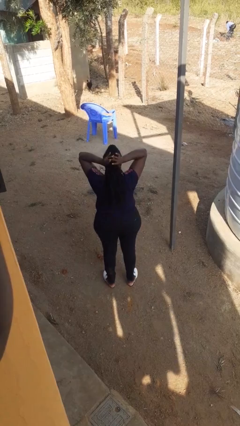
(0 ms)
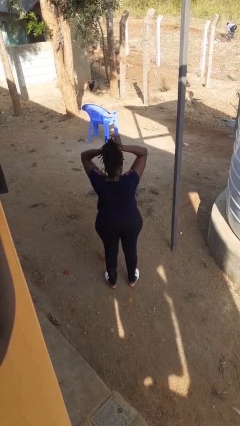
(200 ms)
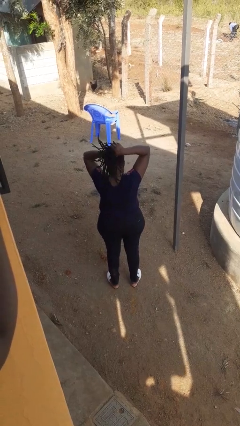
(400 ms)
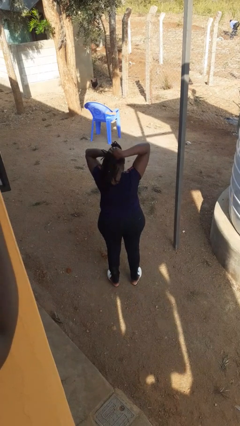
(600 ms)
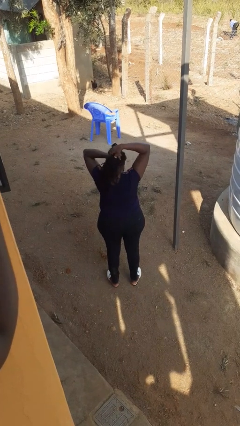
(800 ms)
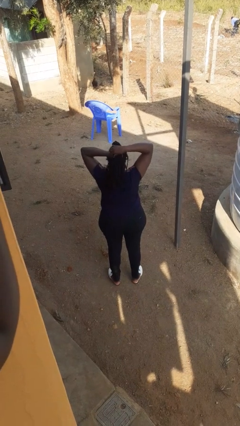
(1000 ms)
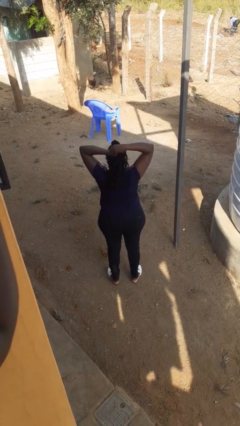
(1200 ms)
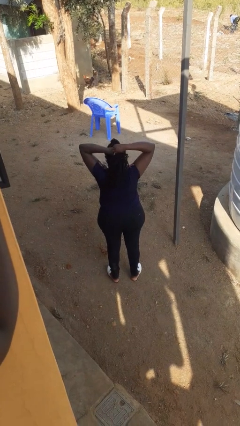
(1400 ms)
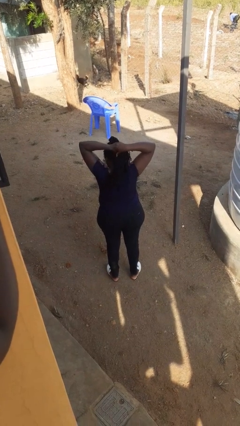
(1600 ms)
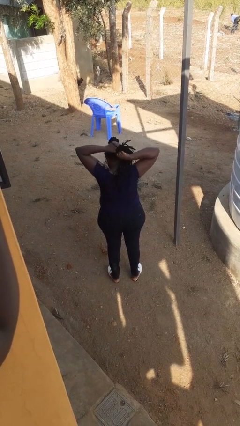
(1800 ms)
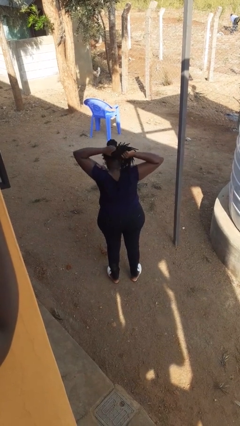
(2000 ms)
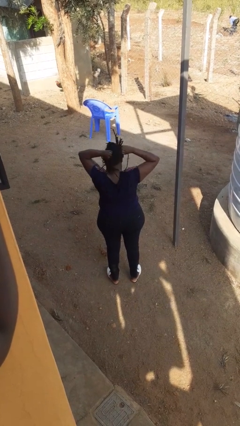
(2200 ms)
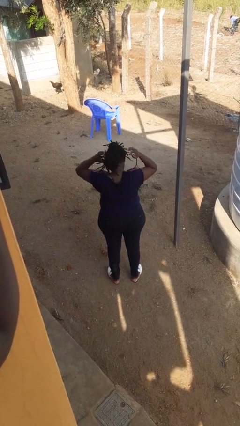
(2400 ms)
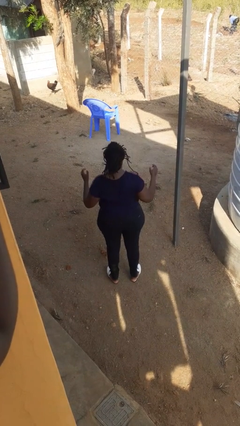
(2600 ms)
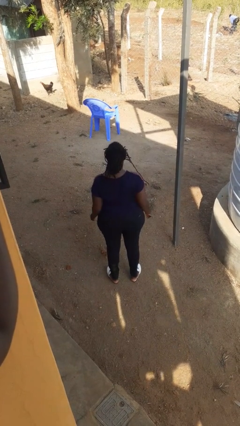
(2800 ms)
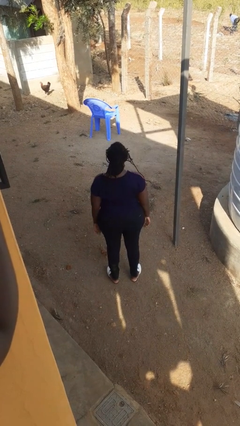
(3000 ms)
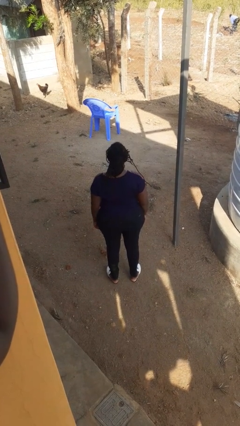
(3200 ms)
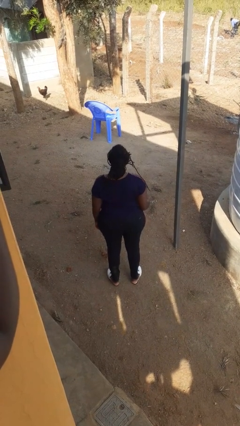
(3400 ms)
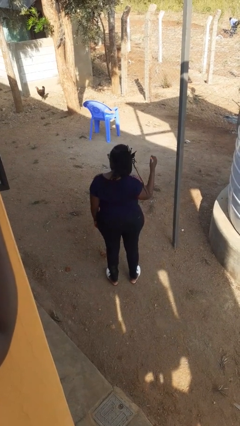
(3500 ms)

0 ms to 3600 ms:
person puts hair in ponytail

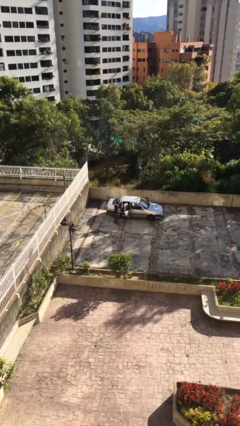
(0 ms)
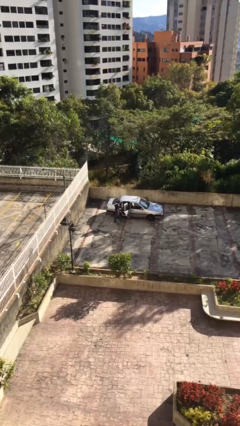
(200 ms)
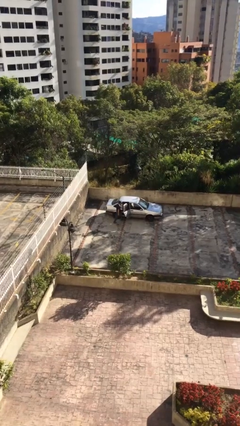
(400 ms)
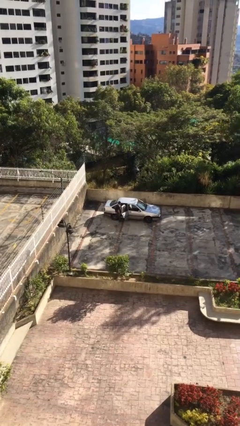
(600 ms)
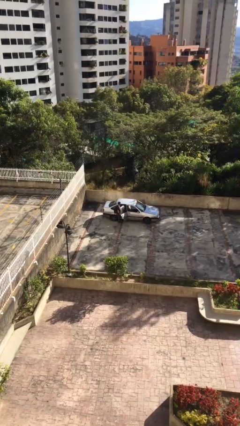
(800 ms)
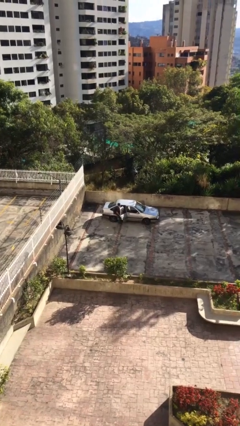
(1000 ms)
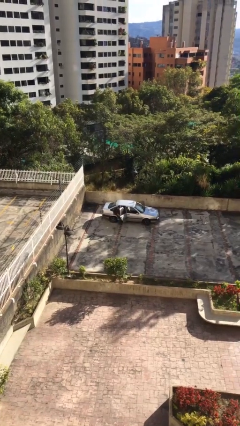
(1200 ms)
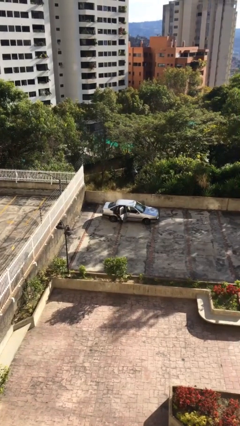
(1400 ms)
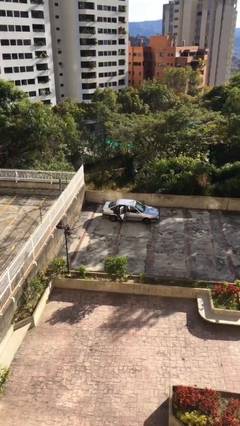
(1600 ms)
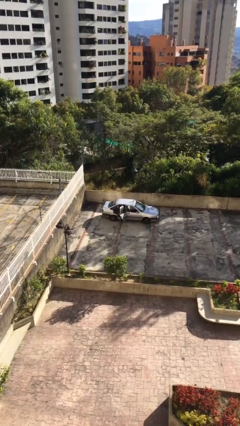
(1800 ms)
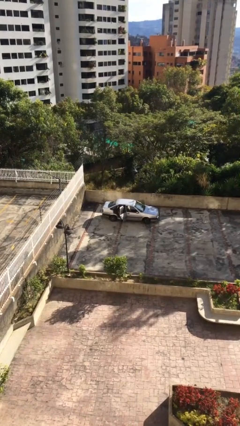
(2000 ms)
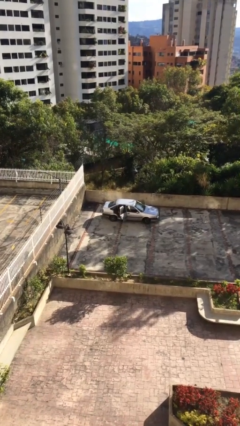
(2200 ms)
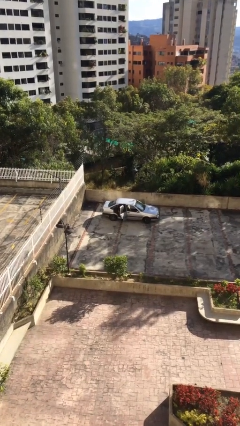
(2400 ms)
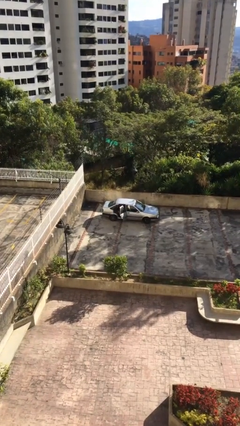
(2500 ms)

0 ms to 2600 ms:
person enters car

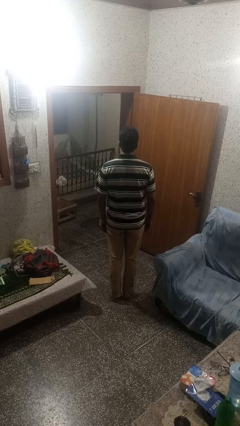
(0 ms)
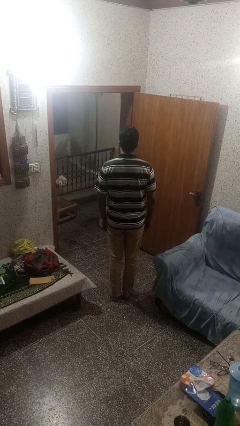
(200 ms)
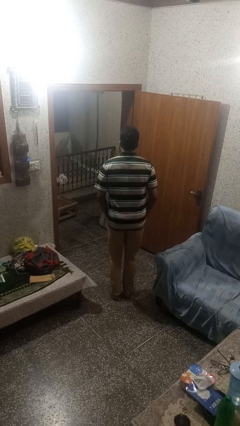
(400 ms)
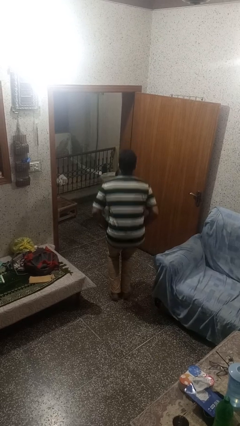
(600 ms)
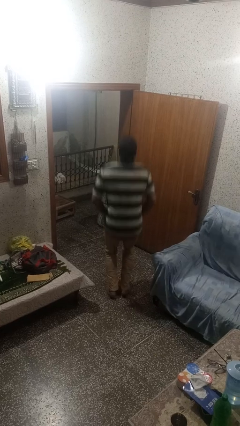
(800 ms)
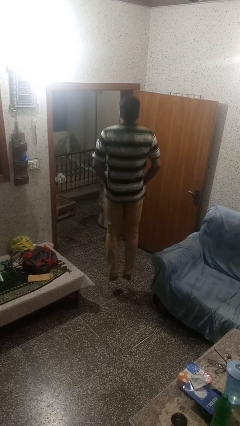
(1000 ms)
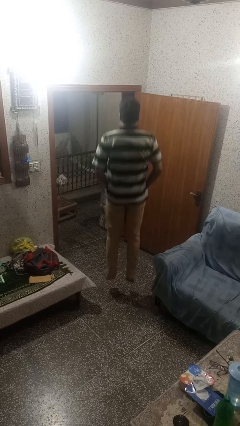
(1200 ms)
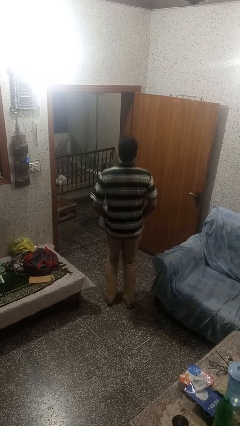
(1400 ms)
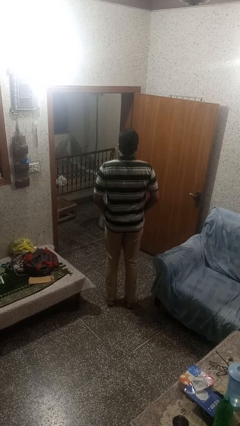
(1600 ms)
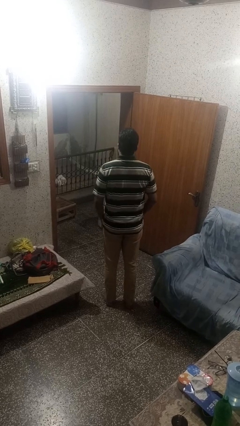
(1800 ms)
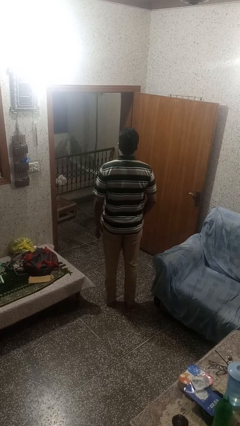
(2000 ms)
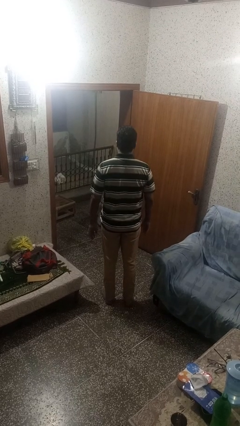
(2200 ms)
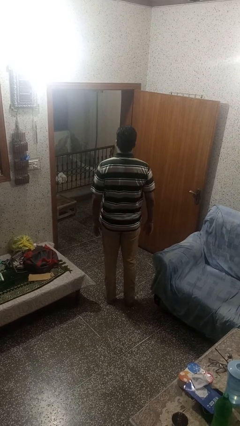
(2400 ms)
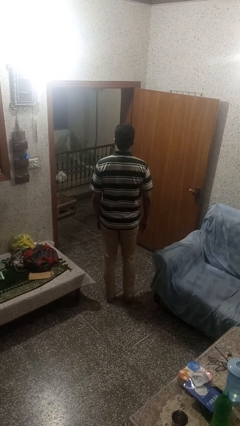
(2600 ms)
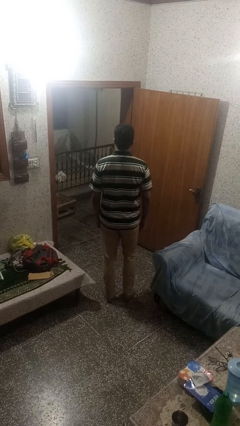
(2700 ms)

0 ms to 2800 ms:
person jumps

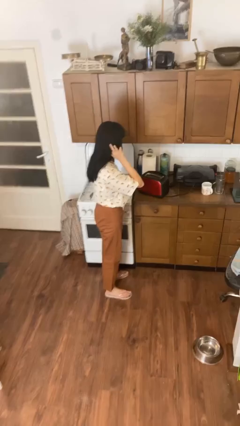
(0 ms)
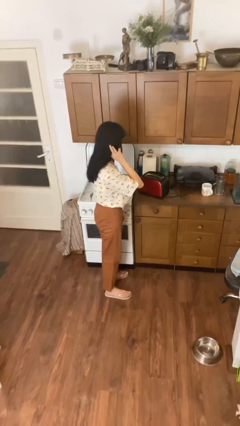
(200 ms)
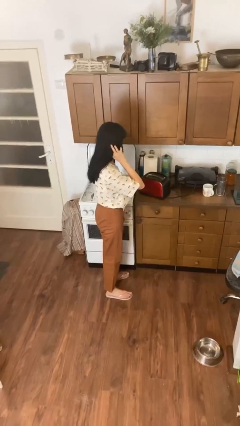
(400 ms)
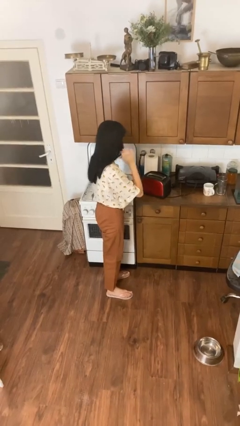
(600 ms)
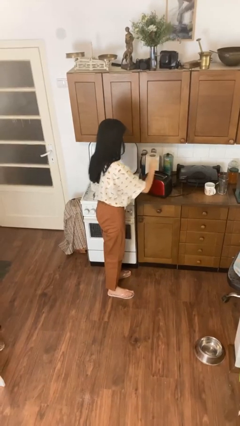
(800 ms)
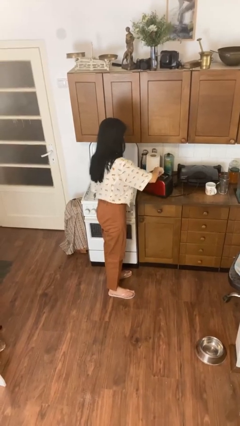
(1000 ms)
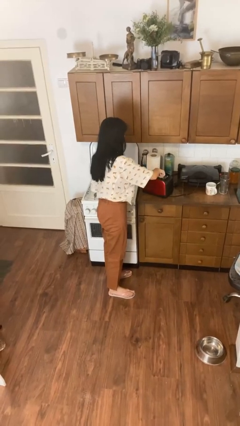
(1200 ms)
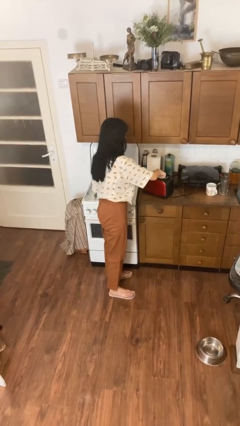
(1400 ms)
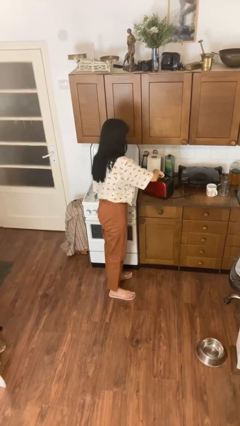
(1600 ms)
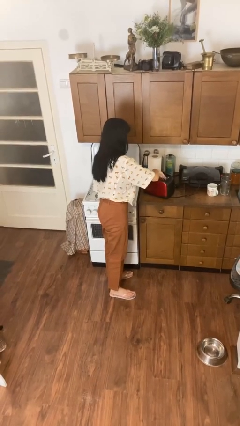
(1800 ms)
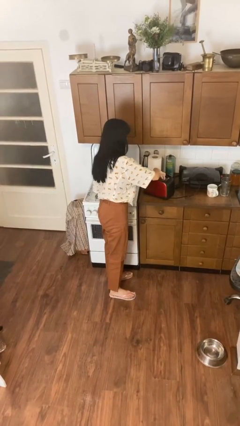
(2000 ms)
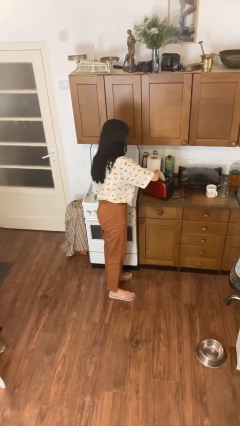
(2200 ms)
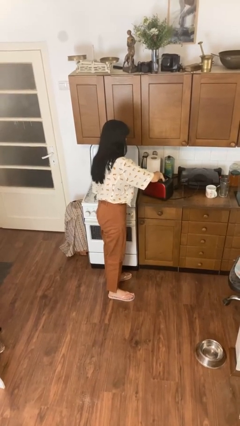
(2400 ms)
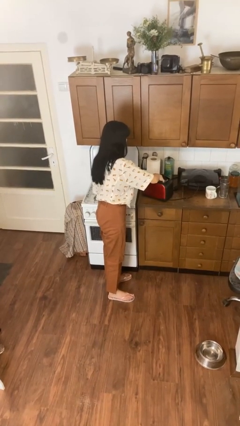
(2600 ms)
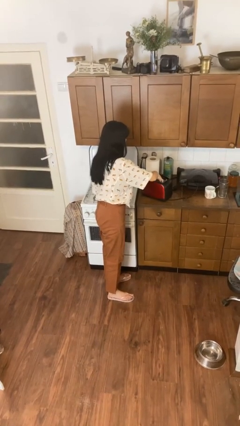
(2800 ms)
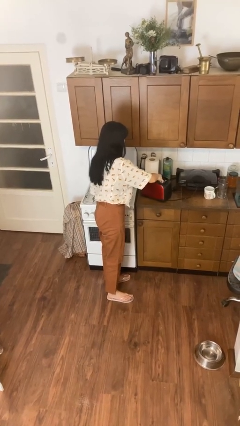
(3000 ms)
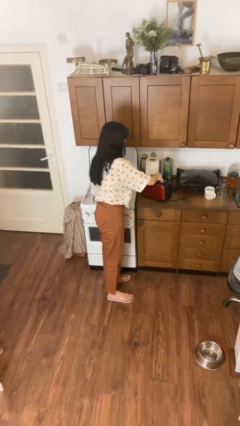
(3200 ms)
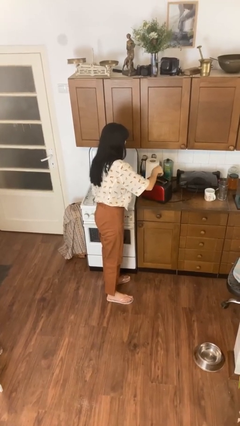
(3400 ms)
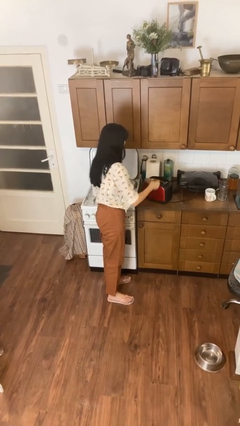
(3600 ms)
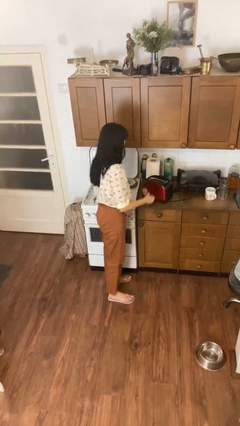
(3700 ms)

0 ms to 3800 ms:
person takes object from toaster

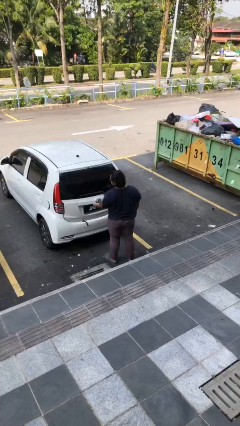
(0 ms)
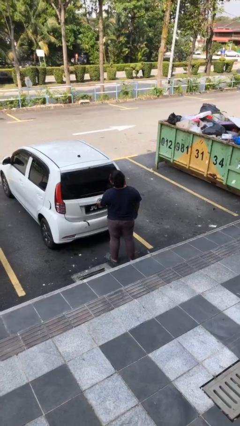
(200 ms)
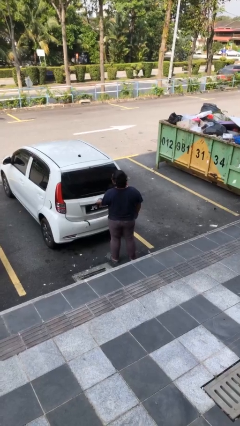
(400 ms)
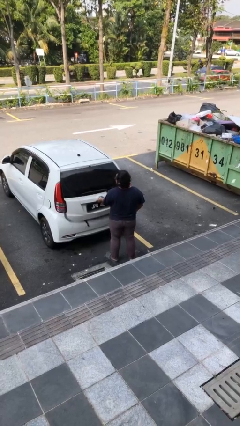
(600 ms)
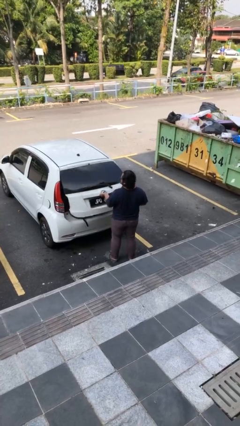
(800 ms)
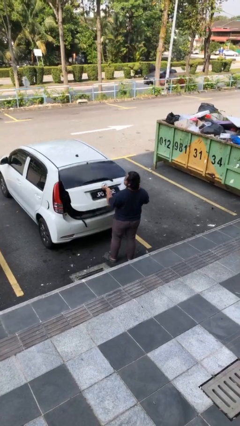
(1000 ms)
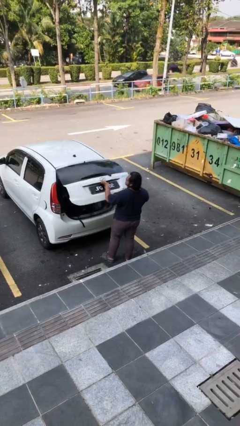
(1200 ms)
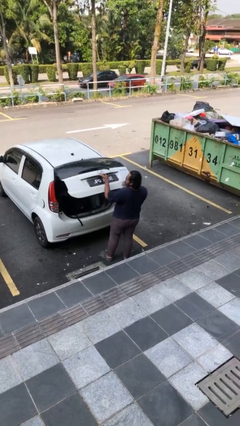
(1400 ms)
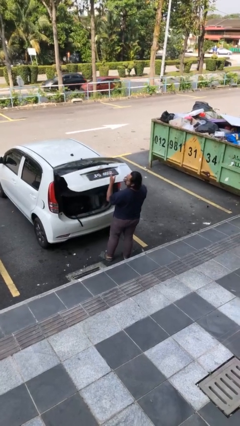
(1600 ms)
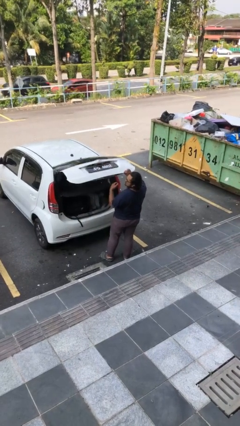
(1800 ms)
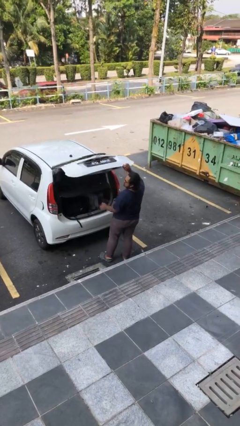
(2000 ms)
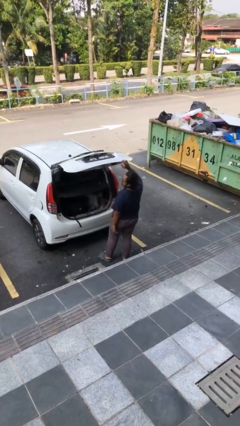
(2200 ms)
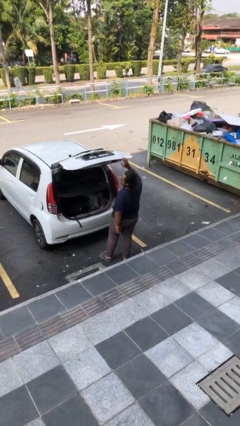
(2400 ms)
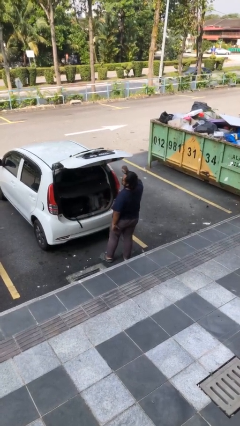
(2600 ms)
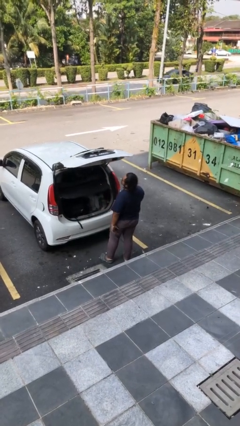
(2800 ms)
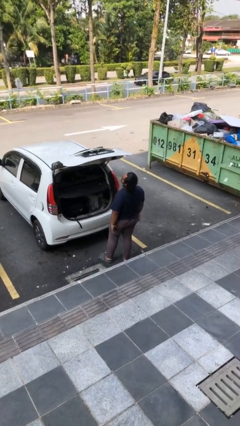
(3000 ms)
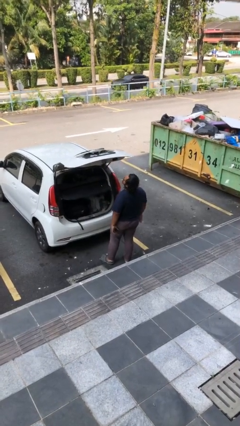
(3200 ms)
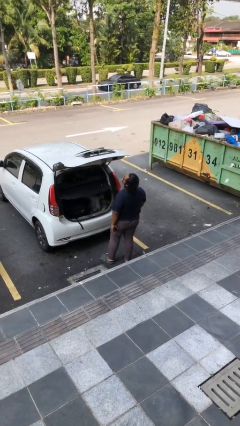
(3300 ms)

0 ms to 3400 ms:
person opens car trunk

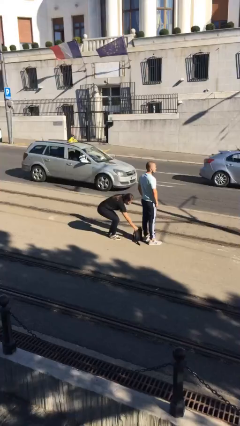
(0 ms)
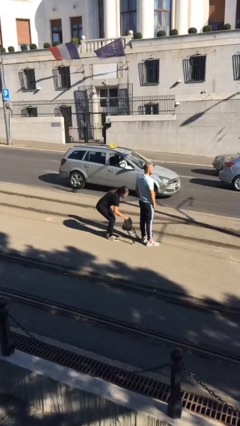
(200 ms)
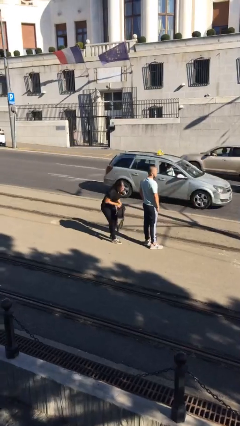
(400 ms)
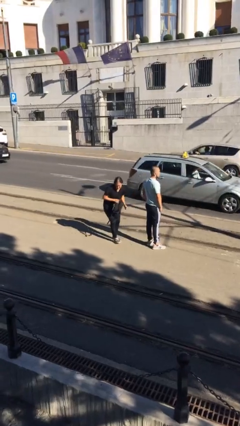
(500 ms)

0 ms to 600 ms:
person steals object from person

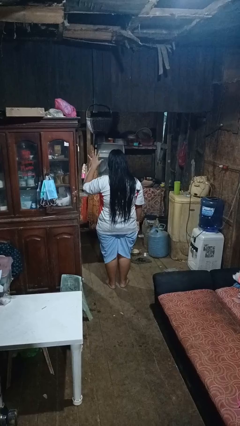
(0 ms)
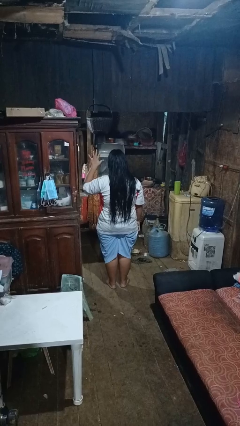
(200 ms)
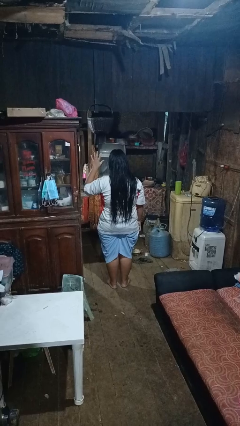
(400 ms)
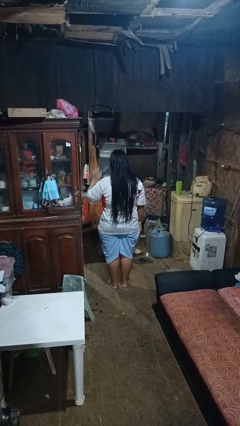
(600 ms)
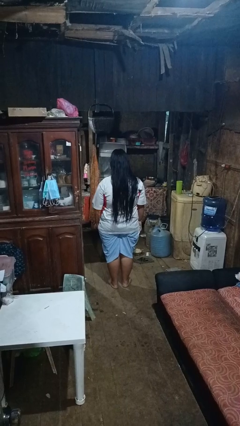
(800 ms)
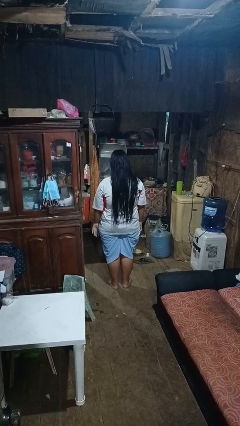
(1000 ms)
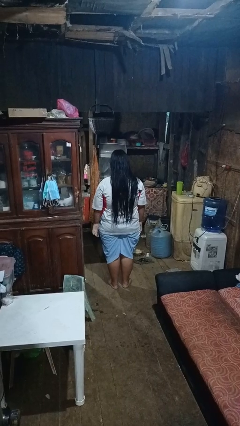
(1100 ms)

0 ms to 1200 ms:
person gestures number five
